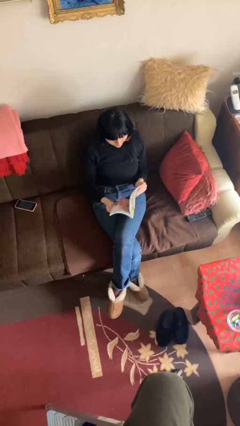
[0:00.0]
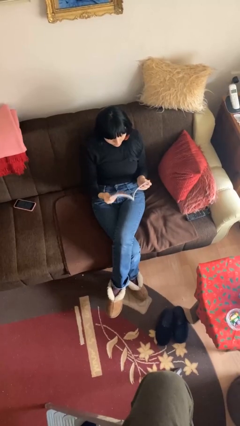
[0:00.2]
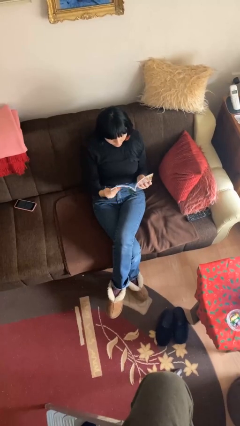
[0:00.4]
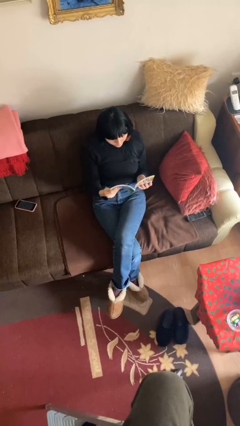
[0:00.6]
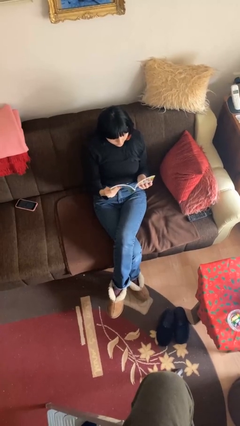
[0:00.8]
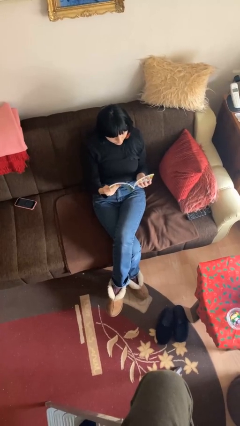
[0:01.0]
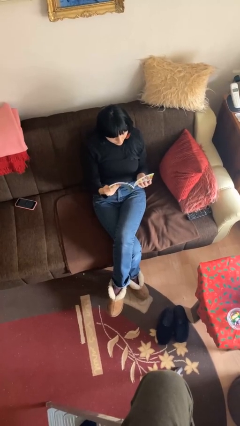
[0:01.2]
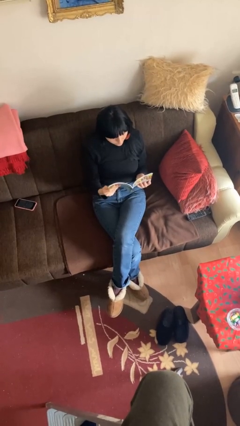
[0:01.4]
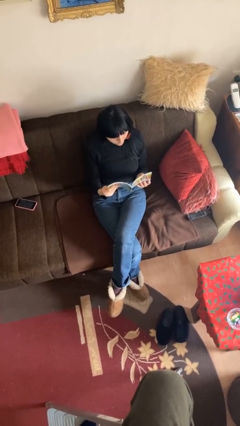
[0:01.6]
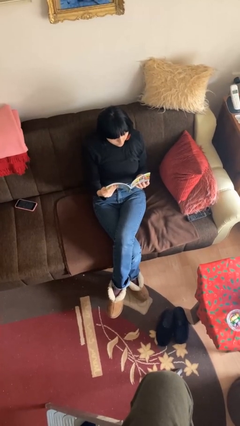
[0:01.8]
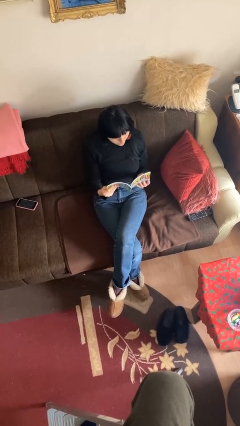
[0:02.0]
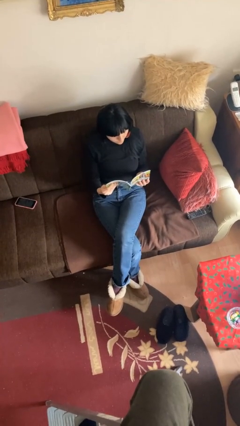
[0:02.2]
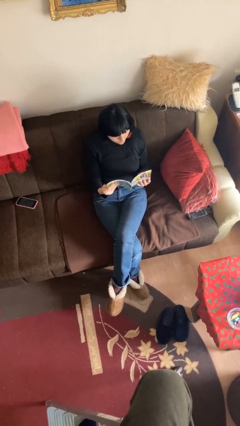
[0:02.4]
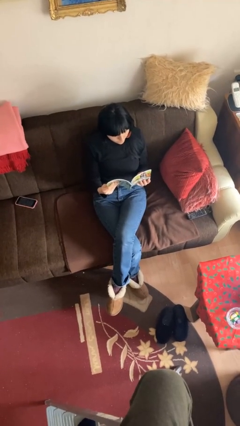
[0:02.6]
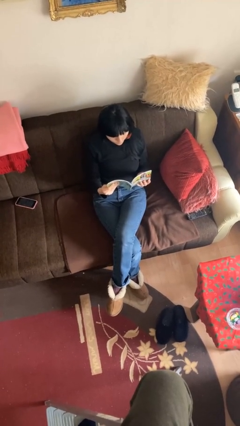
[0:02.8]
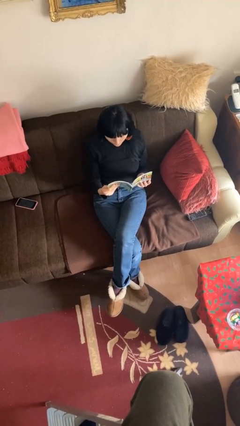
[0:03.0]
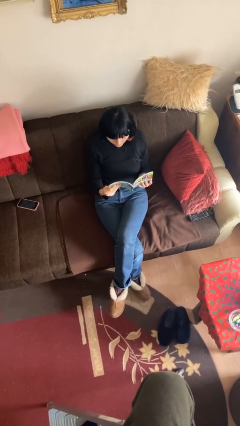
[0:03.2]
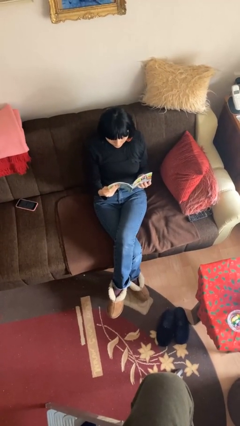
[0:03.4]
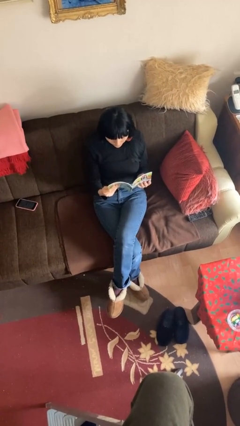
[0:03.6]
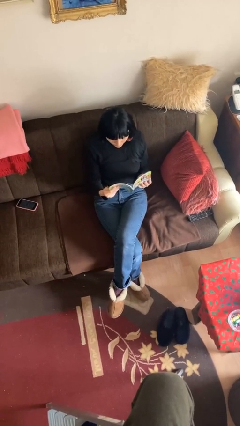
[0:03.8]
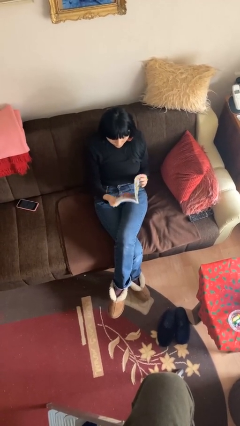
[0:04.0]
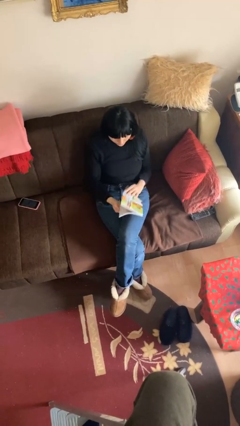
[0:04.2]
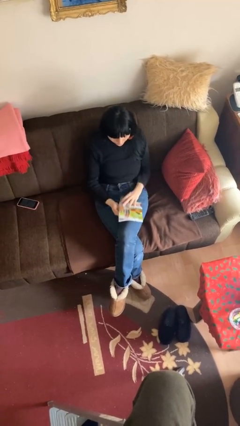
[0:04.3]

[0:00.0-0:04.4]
person reads document

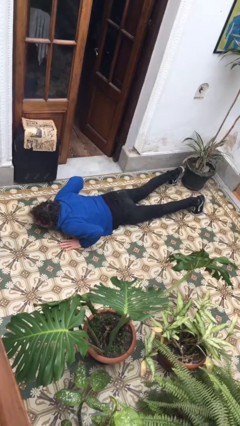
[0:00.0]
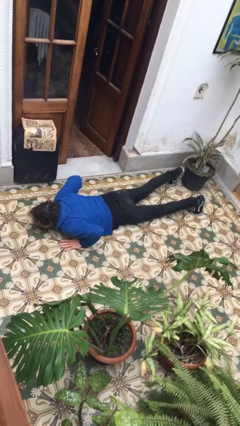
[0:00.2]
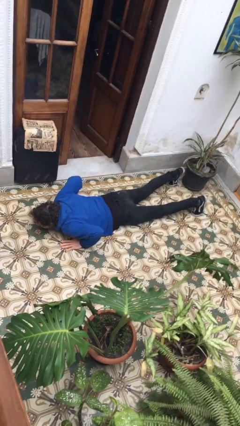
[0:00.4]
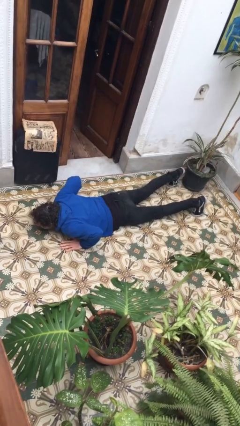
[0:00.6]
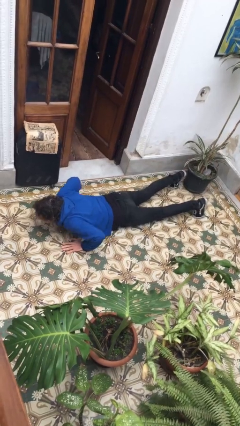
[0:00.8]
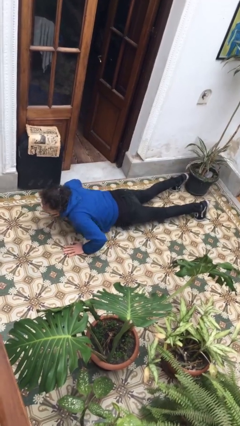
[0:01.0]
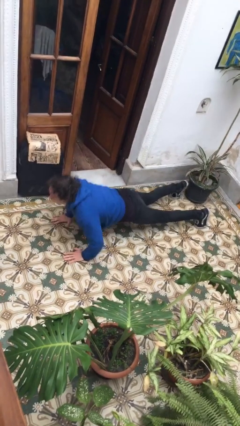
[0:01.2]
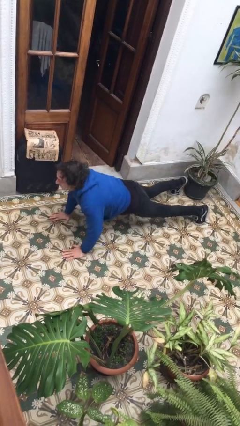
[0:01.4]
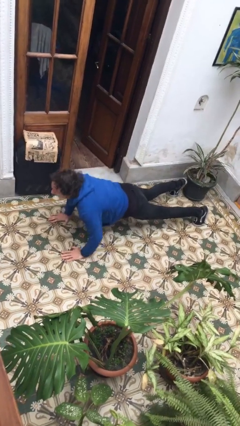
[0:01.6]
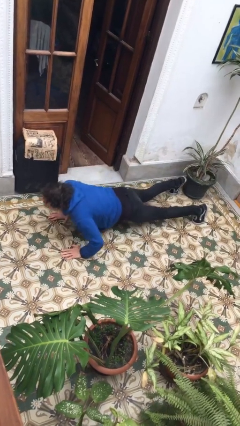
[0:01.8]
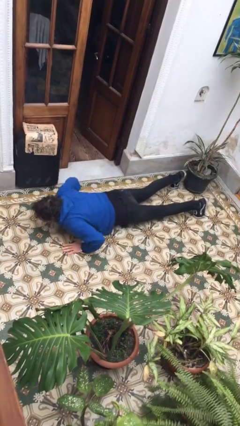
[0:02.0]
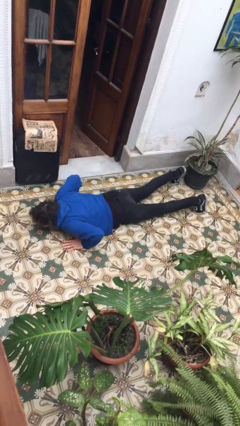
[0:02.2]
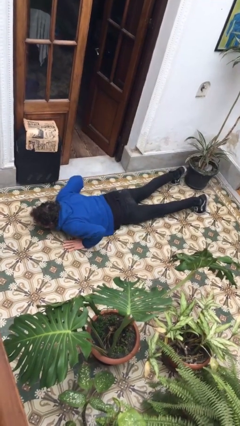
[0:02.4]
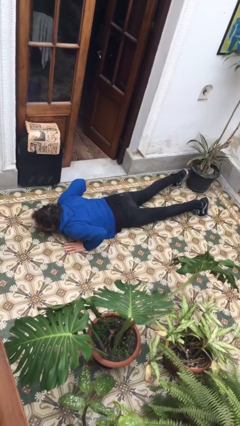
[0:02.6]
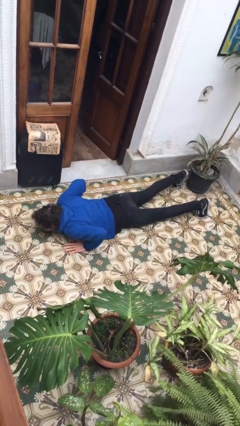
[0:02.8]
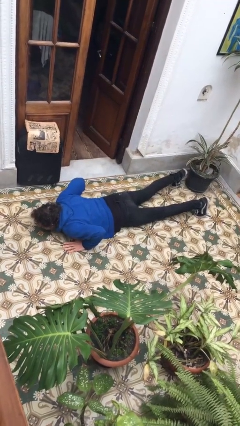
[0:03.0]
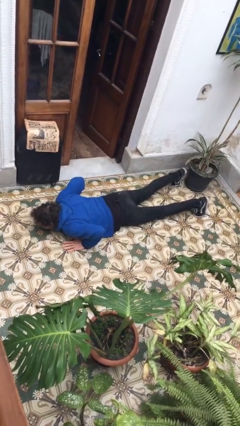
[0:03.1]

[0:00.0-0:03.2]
person exercises with pushup

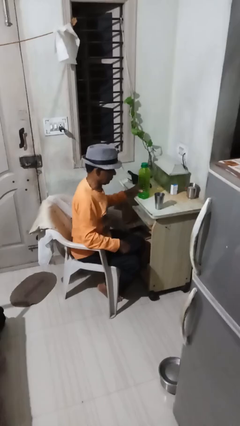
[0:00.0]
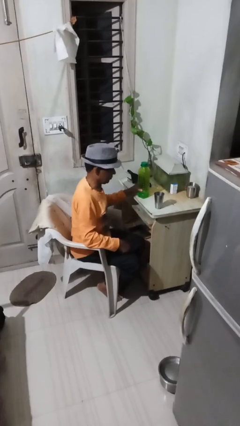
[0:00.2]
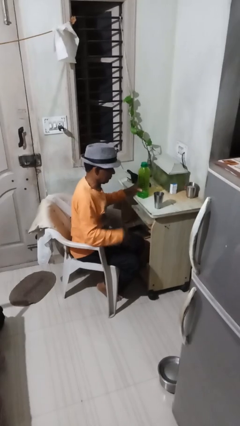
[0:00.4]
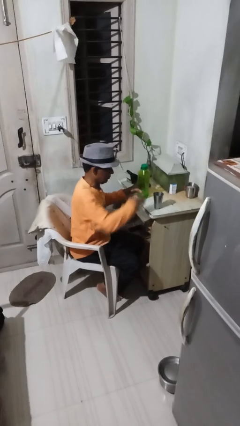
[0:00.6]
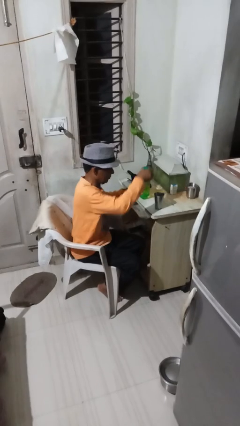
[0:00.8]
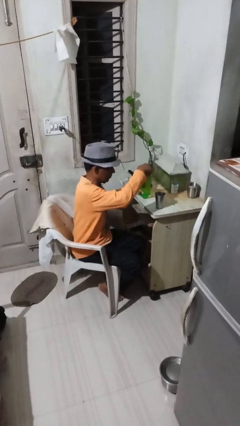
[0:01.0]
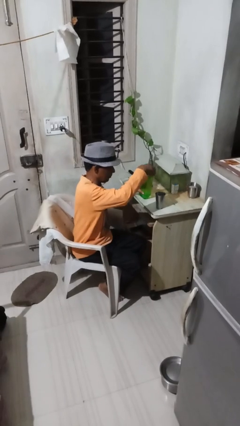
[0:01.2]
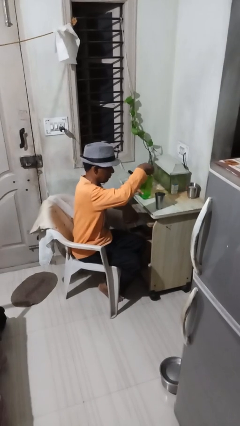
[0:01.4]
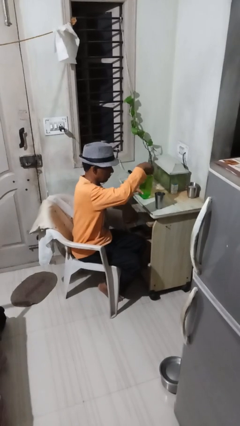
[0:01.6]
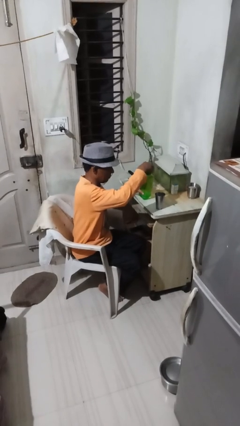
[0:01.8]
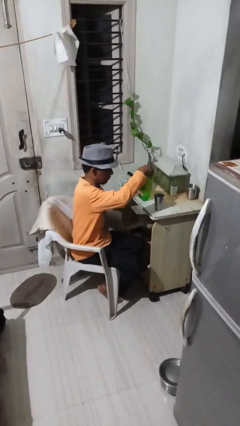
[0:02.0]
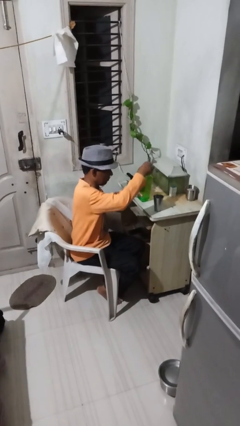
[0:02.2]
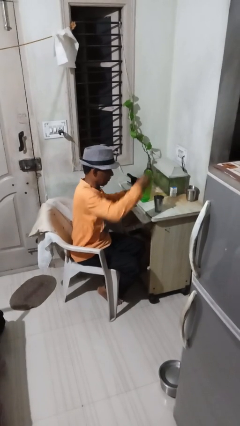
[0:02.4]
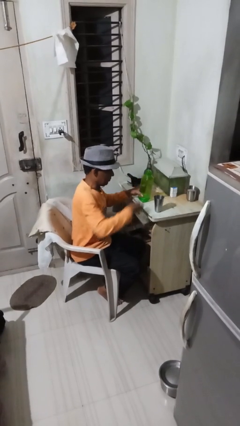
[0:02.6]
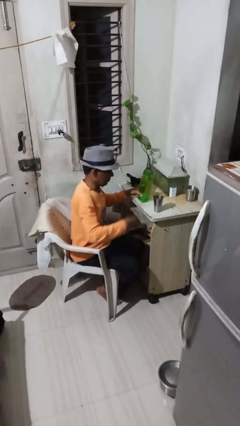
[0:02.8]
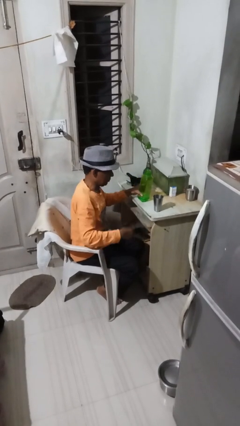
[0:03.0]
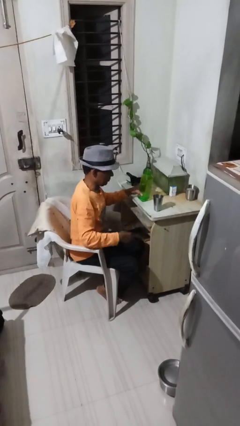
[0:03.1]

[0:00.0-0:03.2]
person unscrews lid from bottle

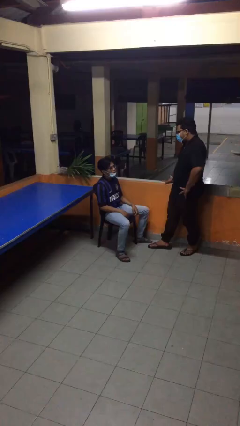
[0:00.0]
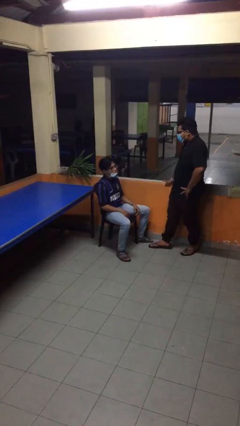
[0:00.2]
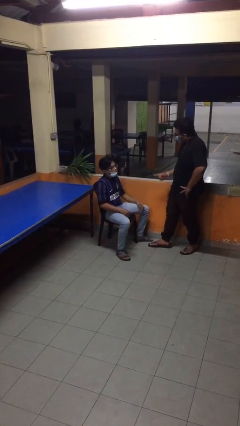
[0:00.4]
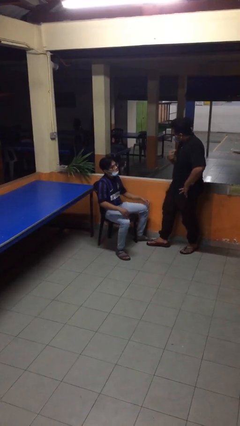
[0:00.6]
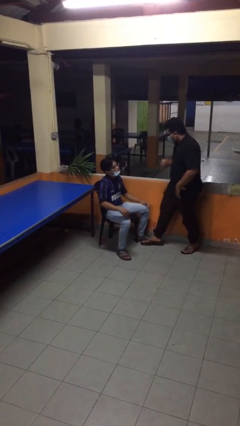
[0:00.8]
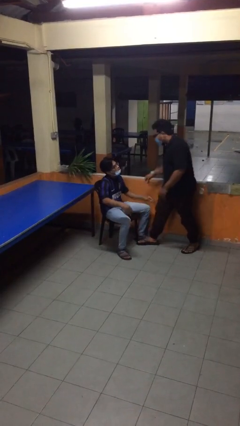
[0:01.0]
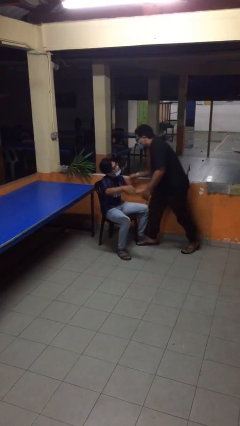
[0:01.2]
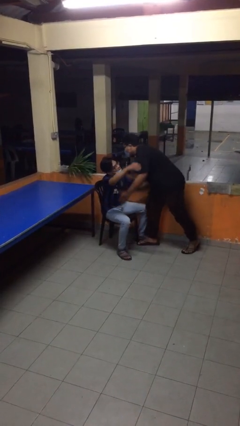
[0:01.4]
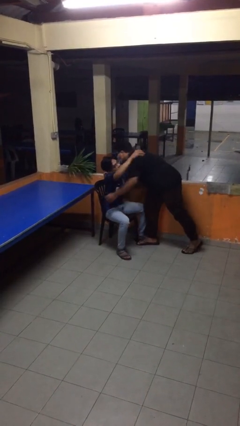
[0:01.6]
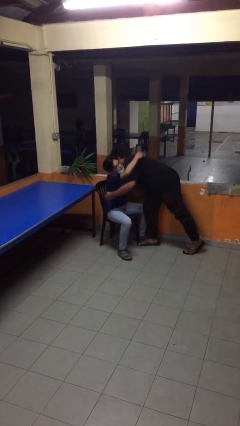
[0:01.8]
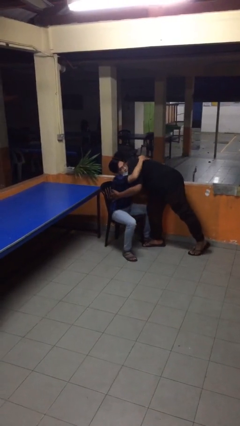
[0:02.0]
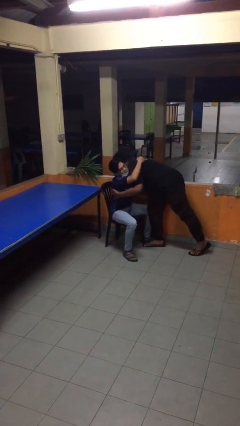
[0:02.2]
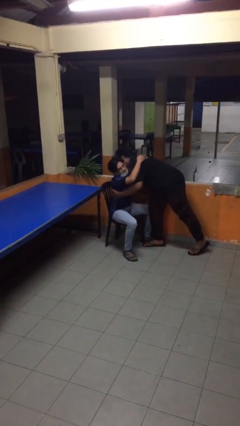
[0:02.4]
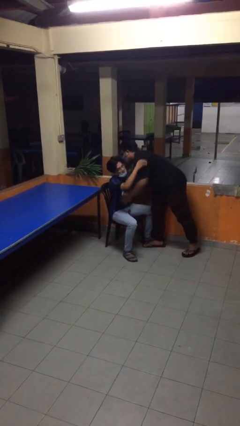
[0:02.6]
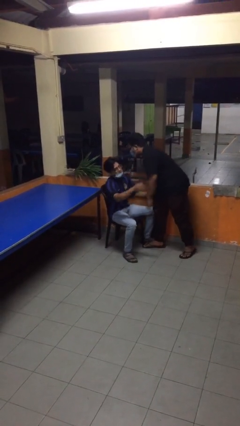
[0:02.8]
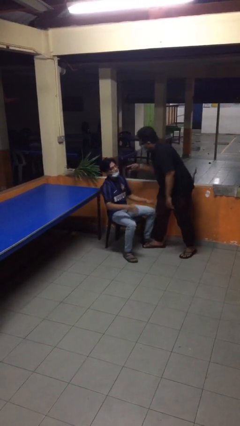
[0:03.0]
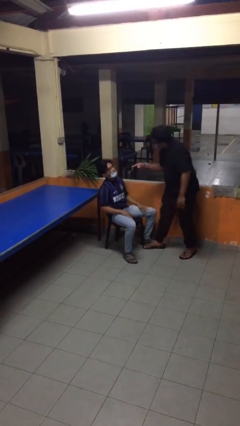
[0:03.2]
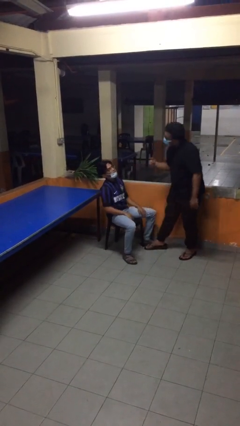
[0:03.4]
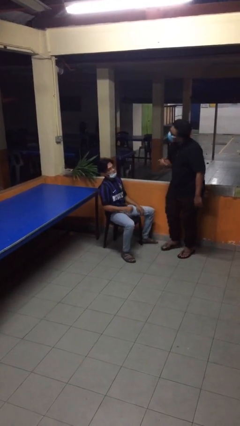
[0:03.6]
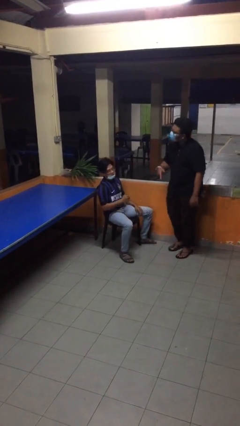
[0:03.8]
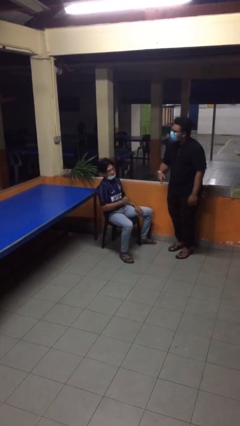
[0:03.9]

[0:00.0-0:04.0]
person embraces person

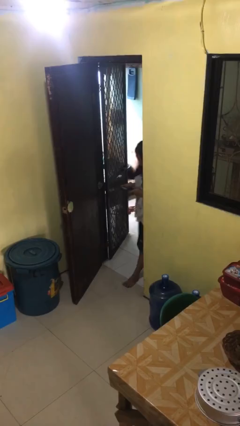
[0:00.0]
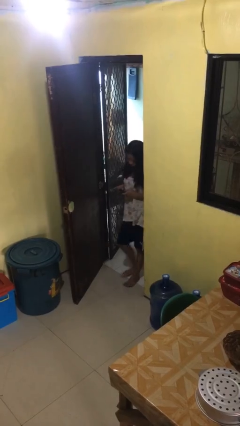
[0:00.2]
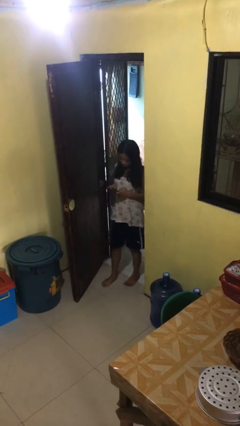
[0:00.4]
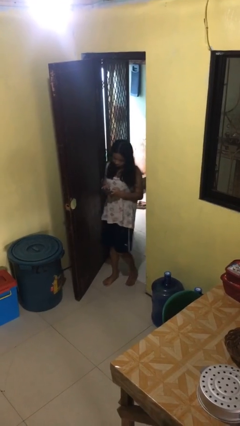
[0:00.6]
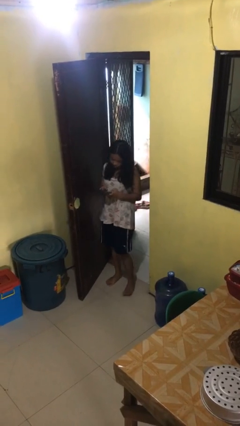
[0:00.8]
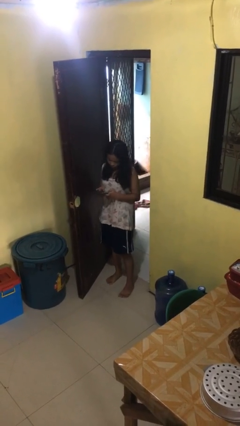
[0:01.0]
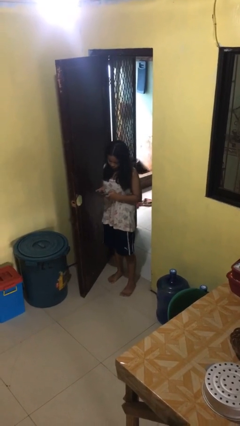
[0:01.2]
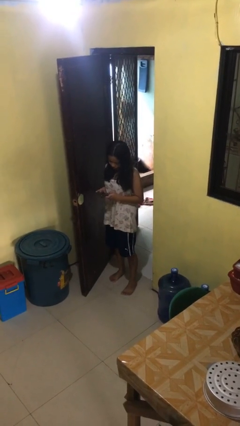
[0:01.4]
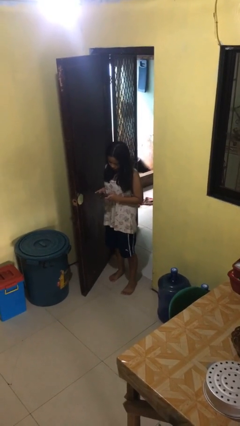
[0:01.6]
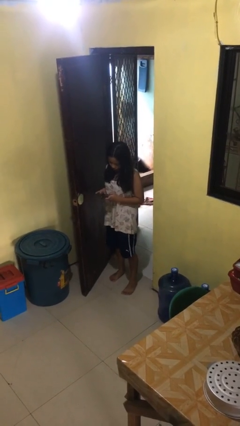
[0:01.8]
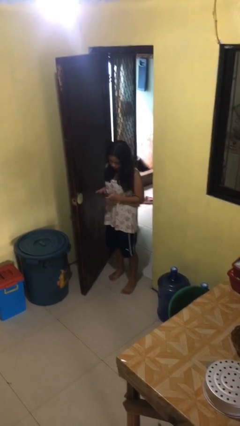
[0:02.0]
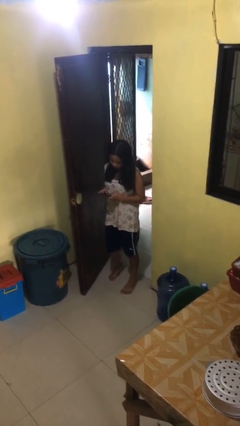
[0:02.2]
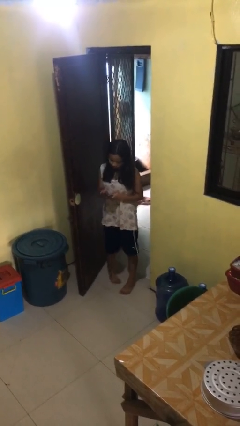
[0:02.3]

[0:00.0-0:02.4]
person enters scene through structure

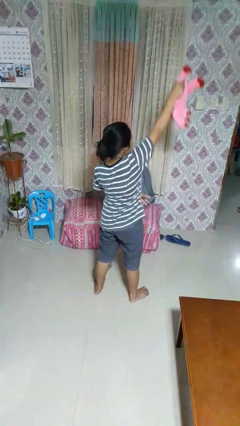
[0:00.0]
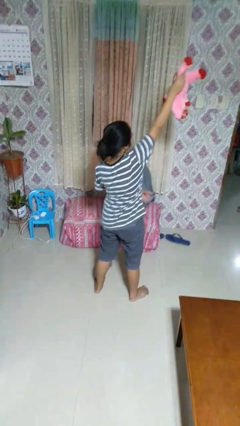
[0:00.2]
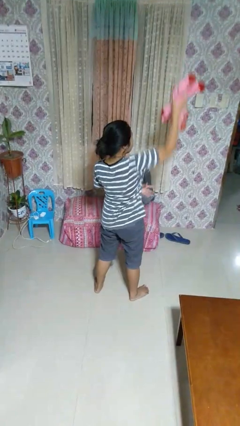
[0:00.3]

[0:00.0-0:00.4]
person drops object
